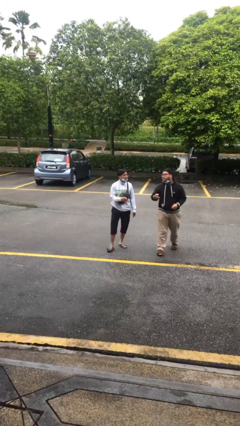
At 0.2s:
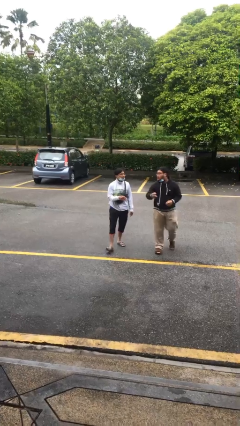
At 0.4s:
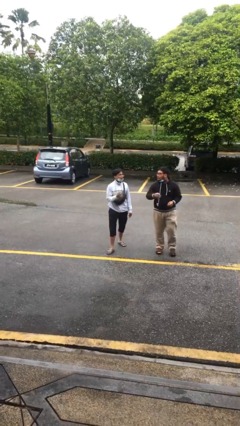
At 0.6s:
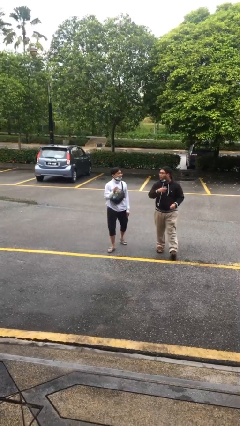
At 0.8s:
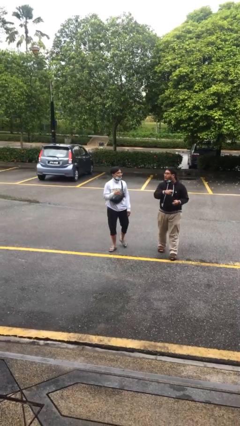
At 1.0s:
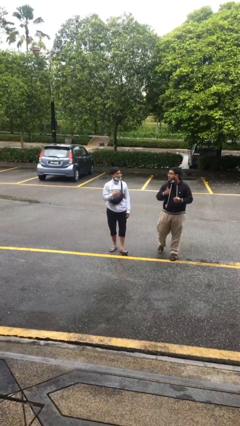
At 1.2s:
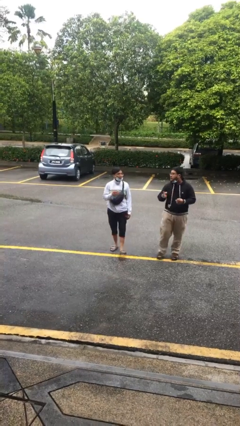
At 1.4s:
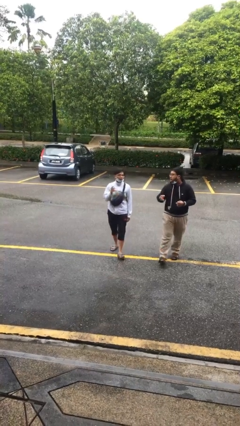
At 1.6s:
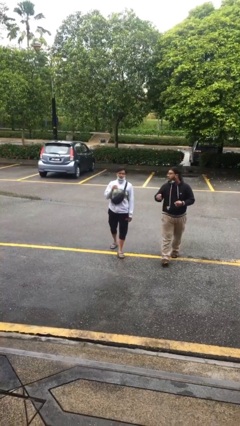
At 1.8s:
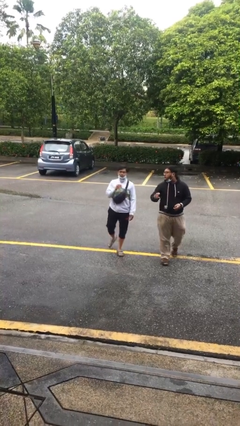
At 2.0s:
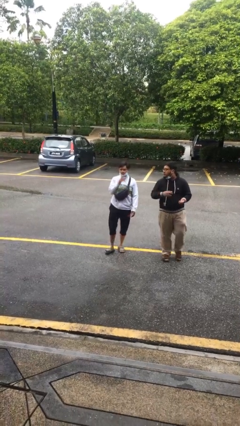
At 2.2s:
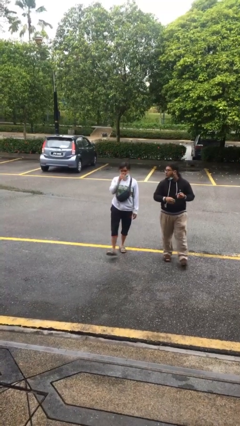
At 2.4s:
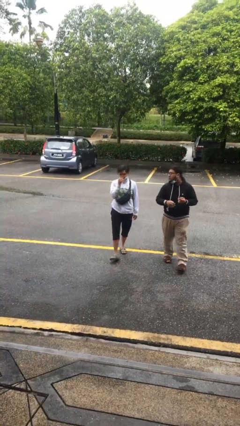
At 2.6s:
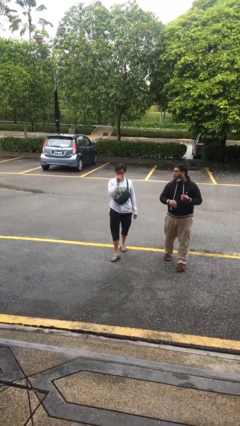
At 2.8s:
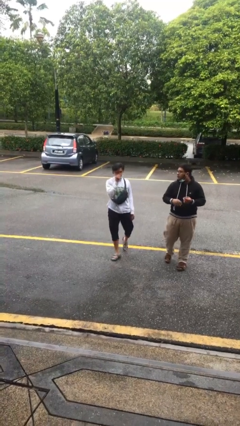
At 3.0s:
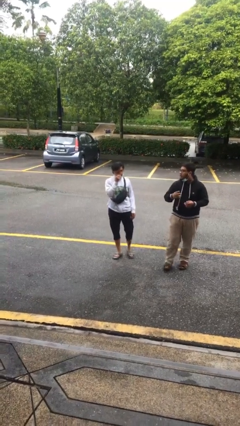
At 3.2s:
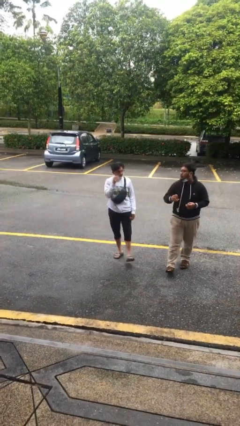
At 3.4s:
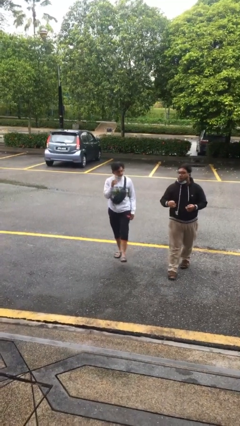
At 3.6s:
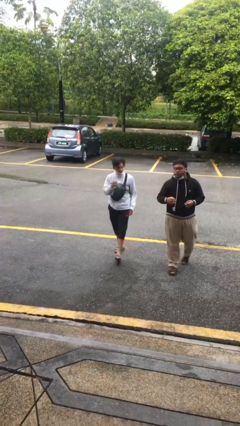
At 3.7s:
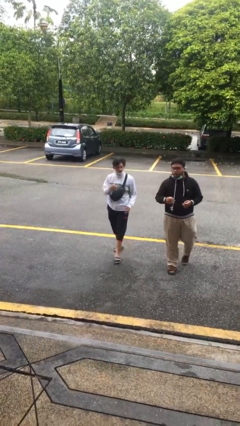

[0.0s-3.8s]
person talks to person

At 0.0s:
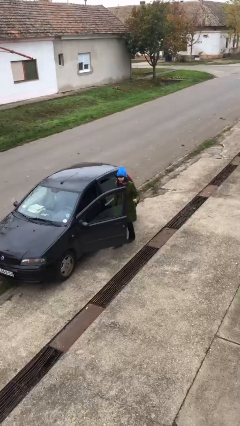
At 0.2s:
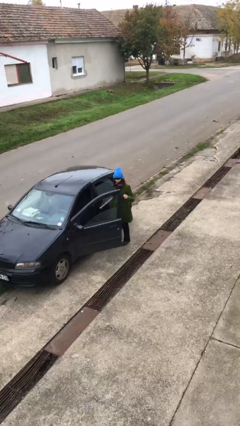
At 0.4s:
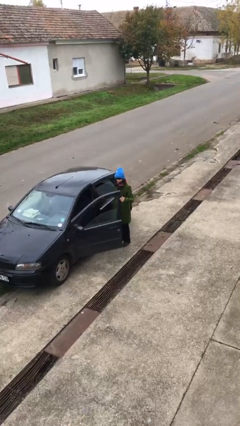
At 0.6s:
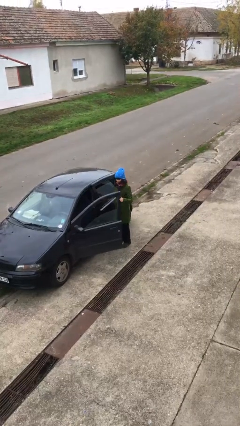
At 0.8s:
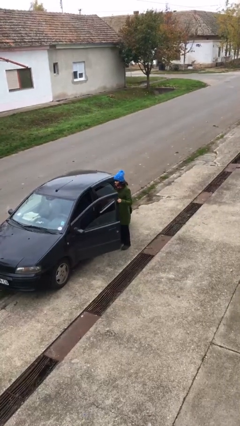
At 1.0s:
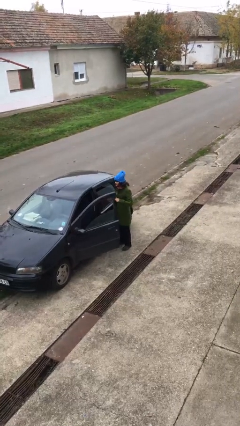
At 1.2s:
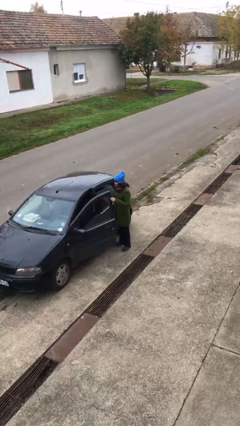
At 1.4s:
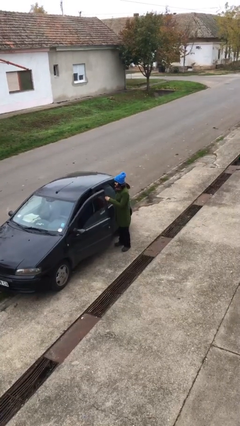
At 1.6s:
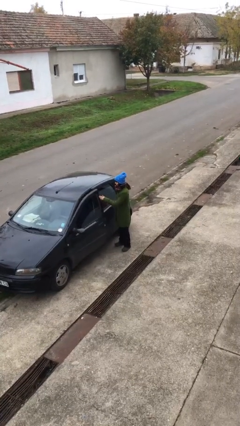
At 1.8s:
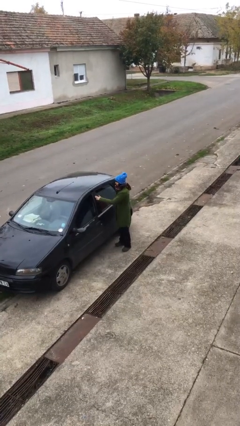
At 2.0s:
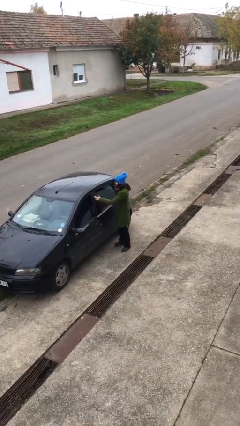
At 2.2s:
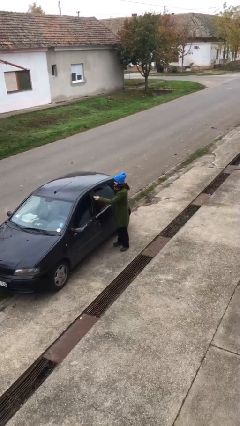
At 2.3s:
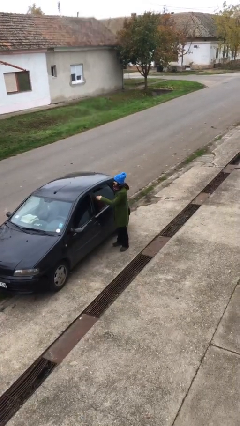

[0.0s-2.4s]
person closes car door

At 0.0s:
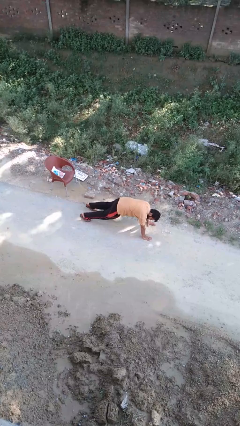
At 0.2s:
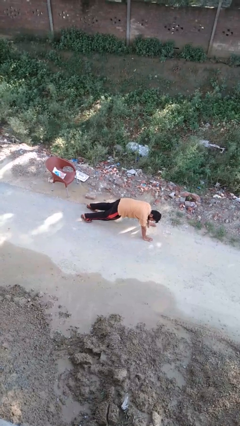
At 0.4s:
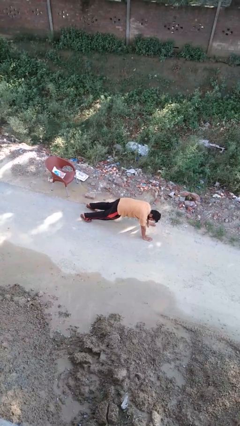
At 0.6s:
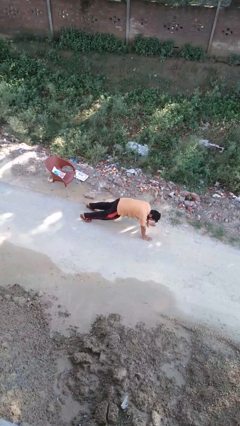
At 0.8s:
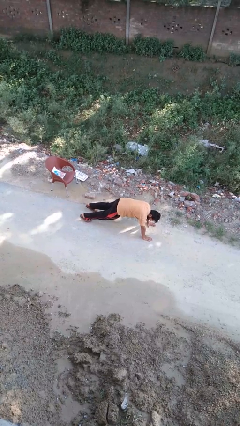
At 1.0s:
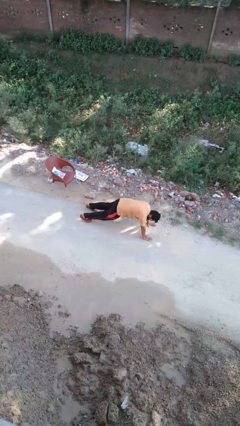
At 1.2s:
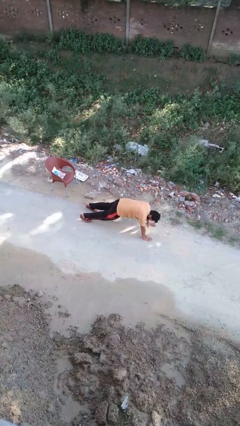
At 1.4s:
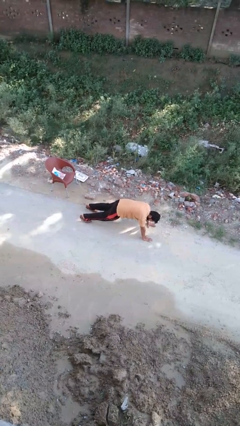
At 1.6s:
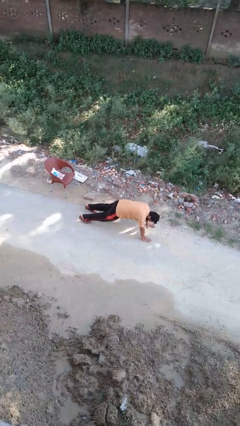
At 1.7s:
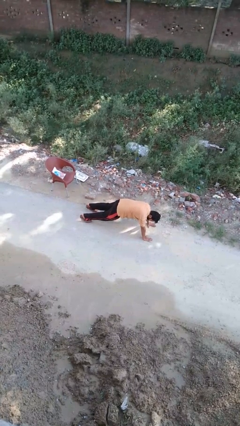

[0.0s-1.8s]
person exercises with pushup

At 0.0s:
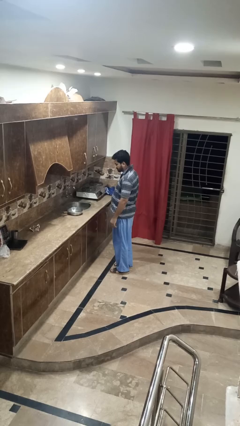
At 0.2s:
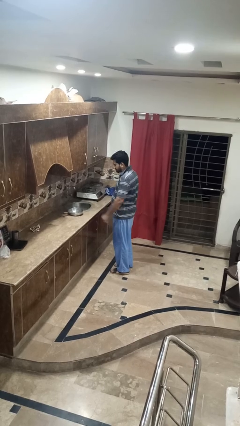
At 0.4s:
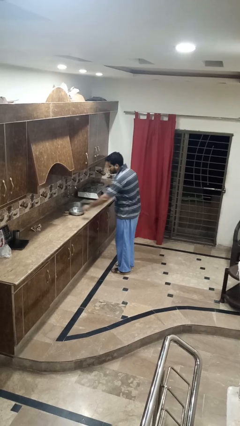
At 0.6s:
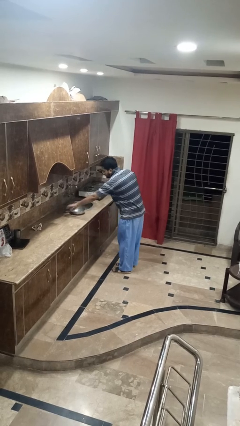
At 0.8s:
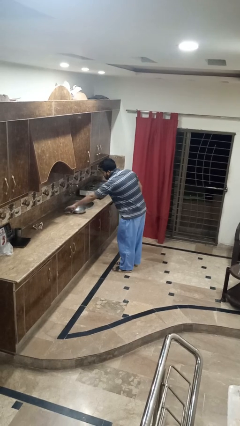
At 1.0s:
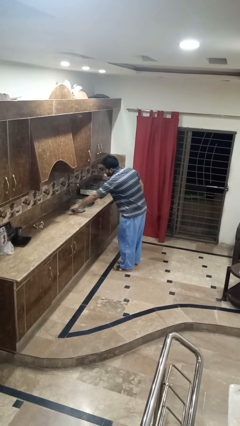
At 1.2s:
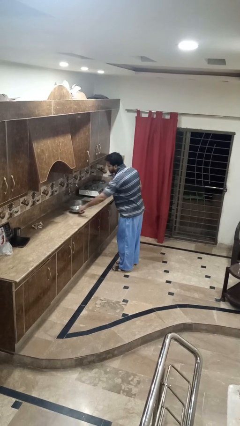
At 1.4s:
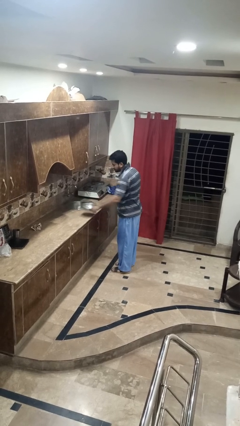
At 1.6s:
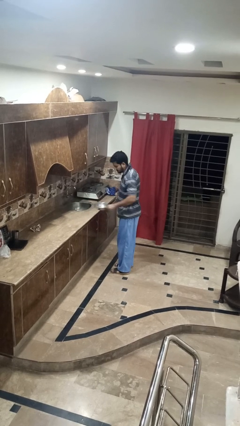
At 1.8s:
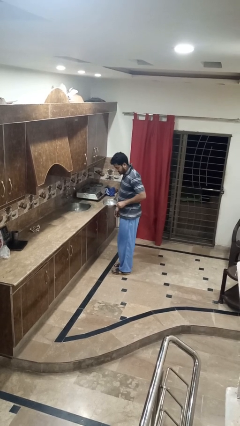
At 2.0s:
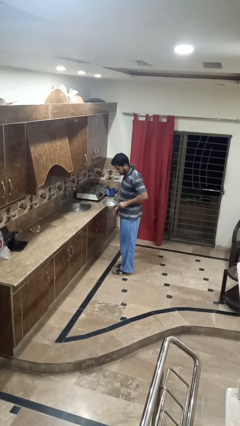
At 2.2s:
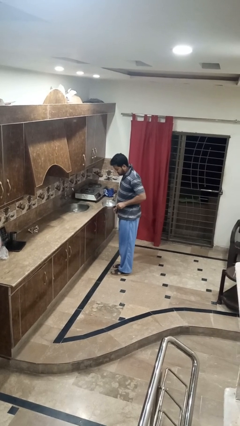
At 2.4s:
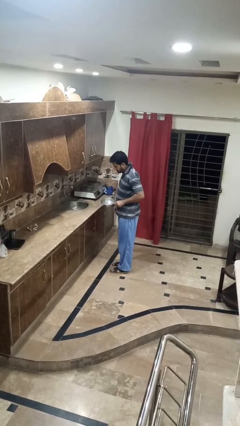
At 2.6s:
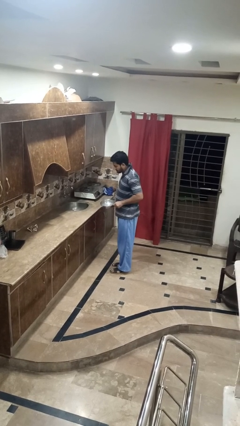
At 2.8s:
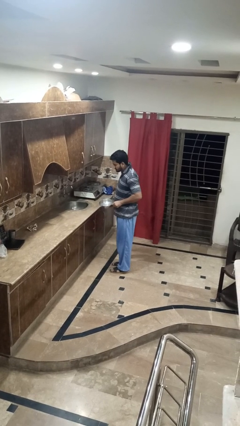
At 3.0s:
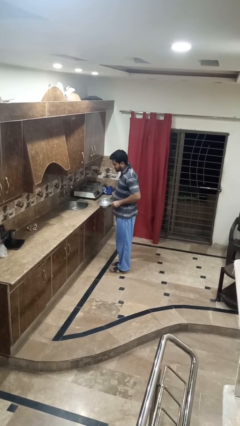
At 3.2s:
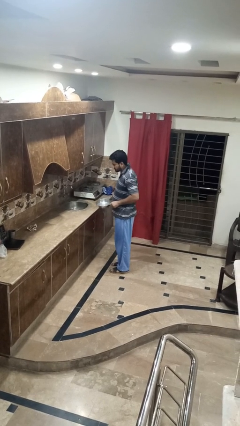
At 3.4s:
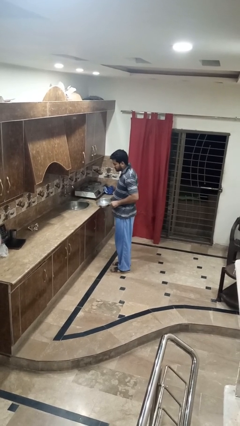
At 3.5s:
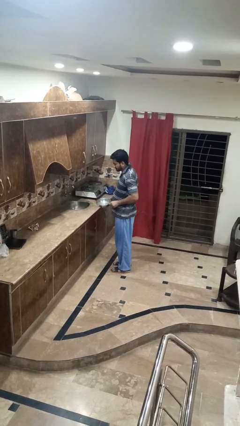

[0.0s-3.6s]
person picks up object from countertop

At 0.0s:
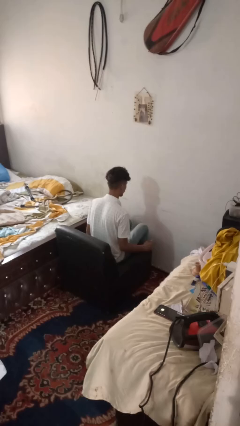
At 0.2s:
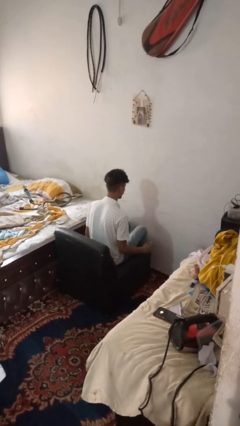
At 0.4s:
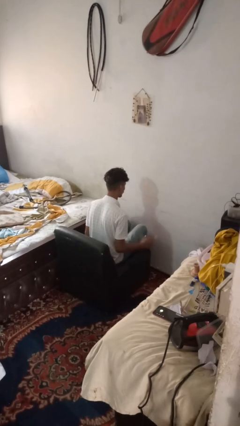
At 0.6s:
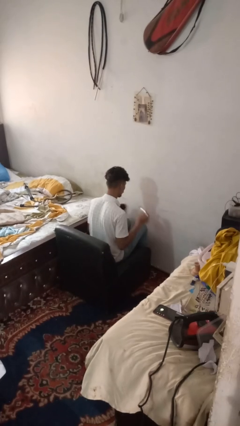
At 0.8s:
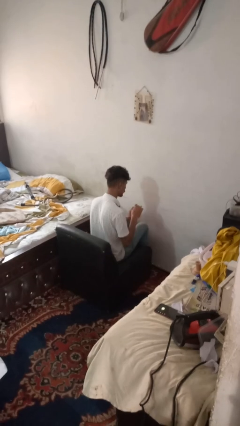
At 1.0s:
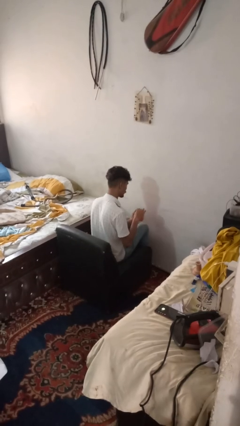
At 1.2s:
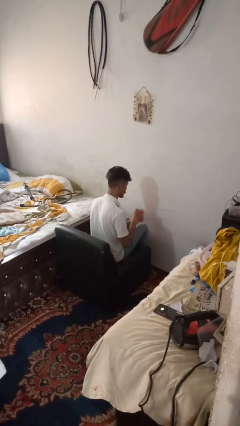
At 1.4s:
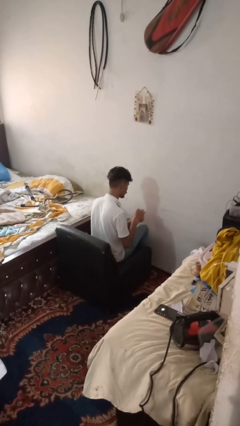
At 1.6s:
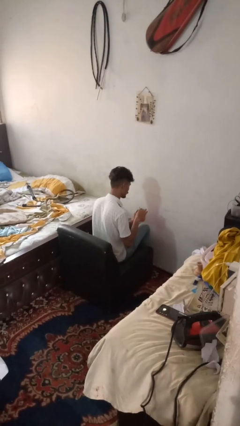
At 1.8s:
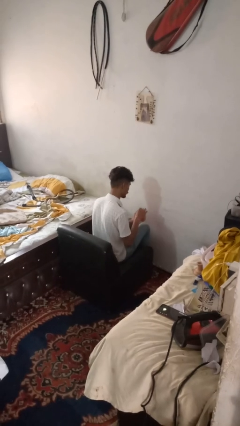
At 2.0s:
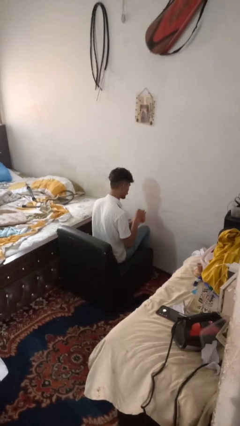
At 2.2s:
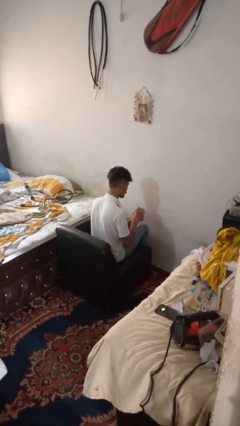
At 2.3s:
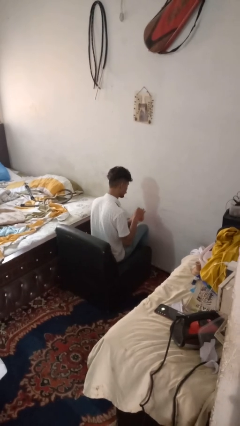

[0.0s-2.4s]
person stirs mug

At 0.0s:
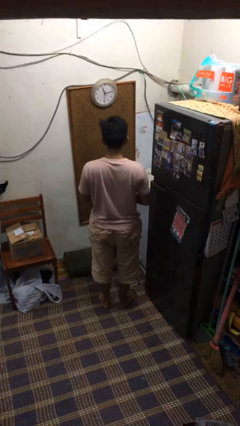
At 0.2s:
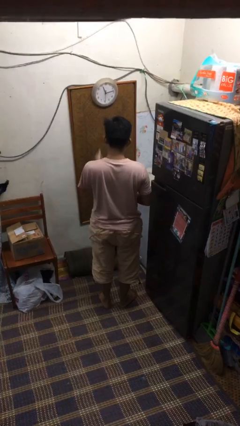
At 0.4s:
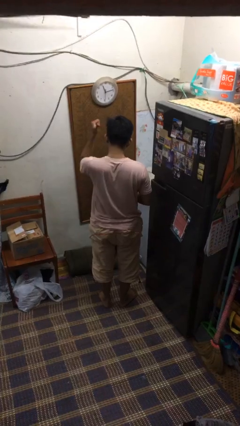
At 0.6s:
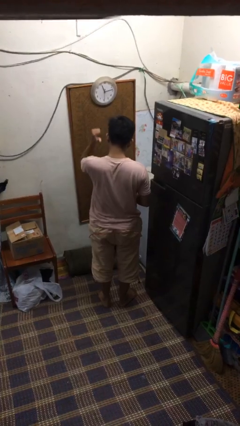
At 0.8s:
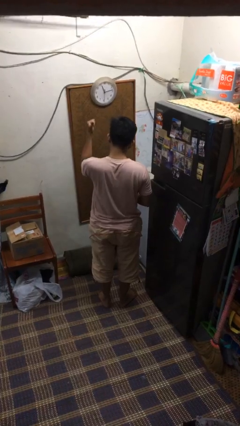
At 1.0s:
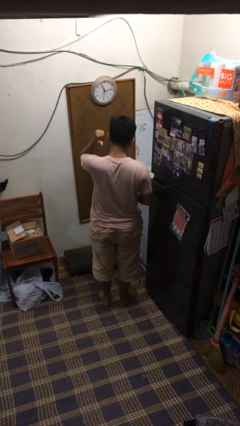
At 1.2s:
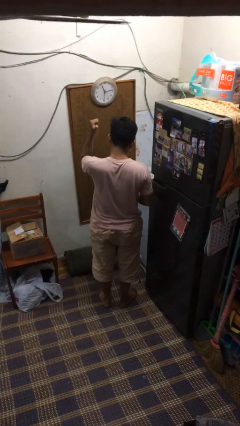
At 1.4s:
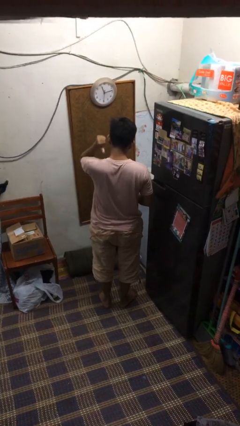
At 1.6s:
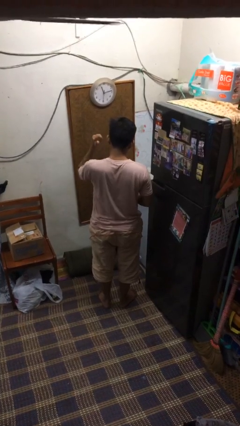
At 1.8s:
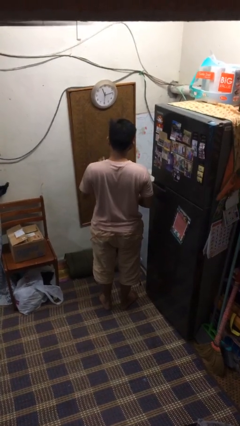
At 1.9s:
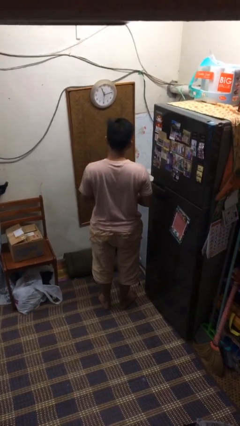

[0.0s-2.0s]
person gestures behind me

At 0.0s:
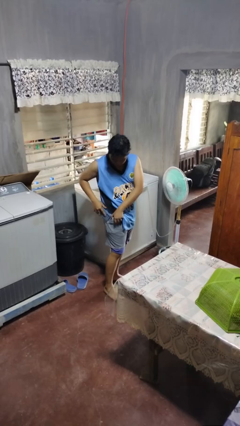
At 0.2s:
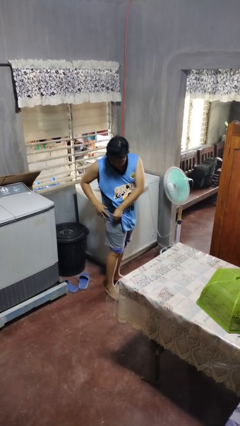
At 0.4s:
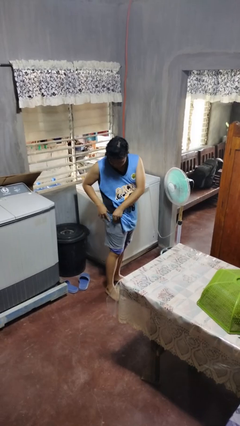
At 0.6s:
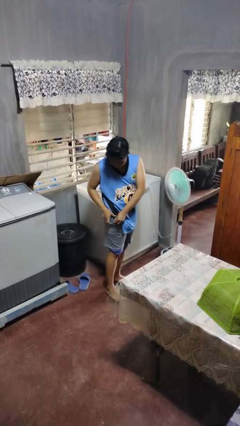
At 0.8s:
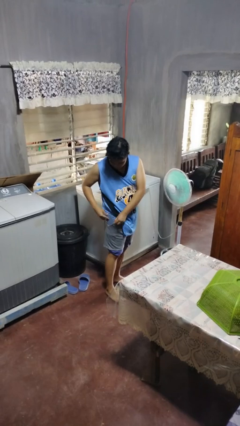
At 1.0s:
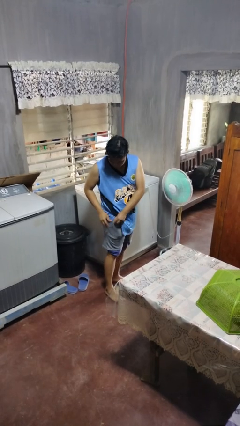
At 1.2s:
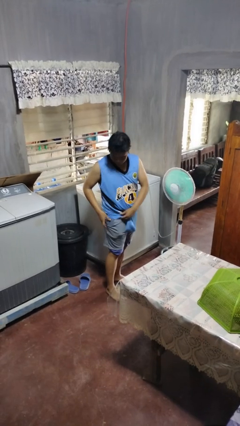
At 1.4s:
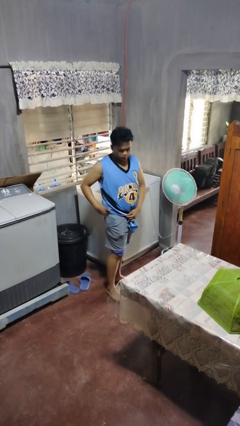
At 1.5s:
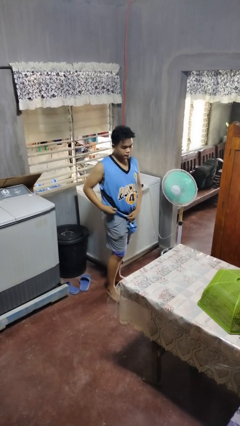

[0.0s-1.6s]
person puts phone into pocket
